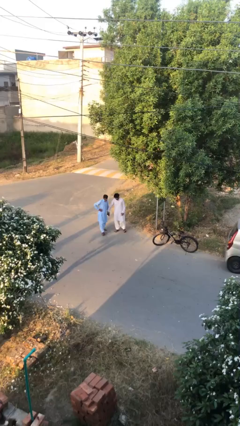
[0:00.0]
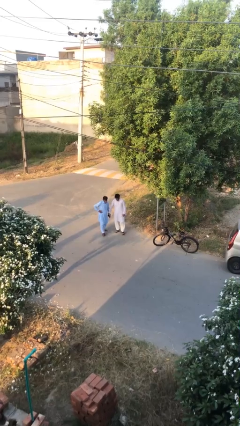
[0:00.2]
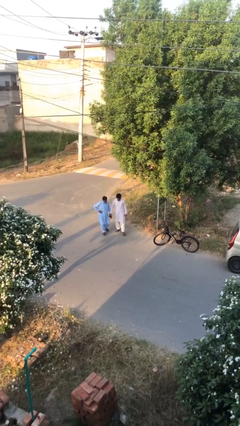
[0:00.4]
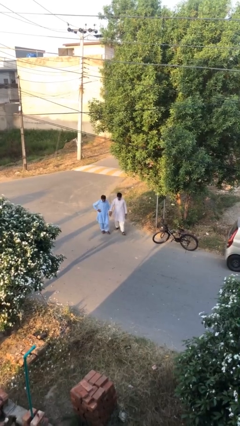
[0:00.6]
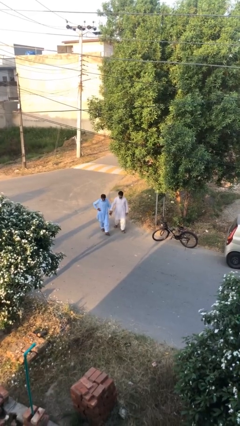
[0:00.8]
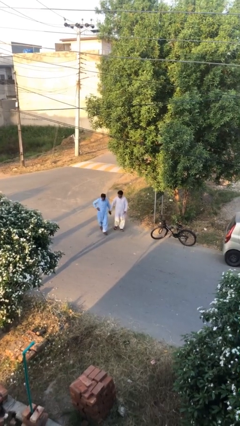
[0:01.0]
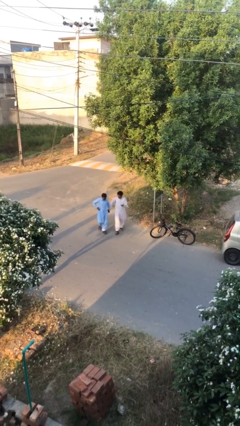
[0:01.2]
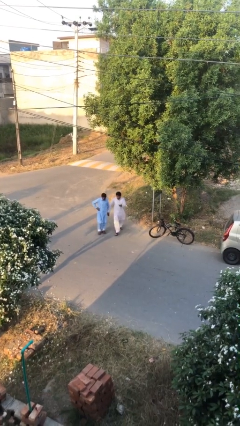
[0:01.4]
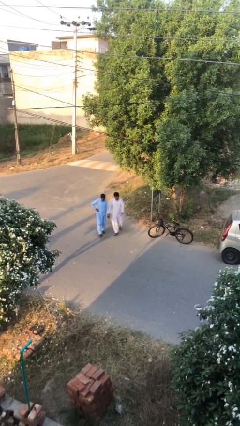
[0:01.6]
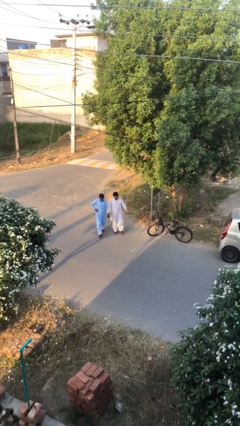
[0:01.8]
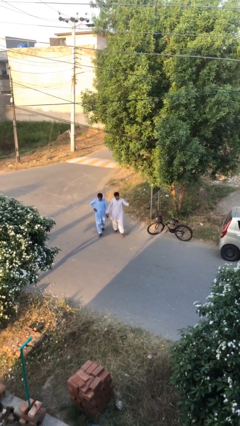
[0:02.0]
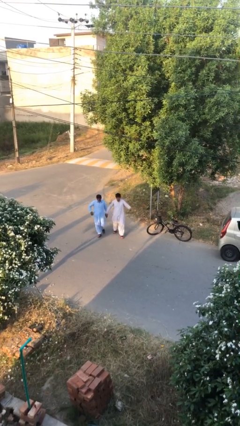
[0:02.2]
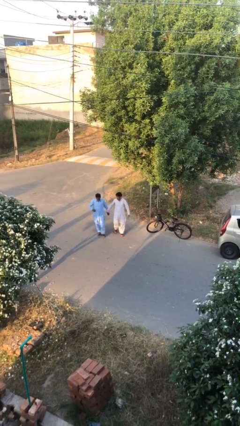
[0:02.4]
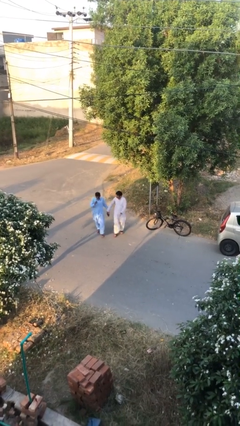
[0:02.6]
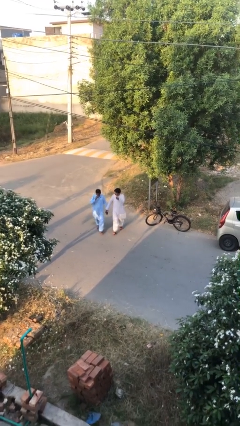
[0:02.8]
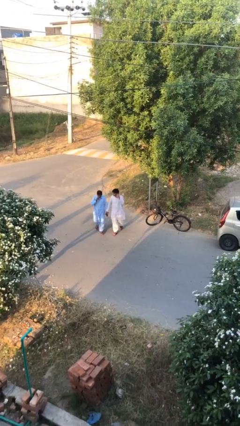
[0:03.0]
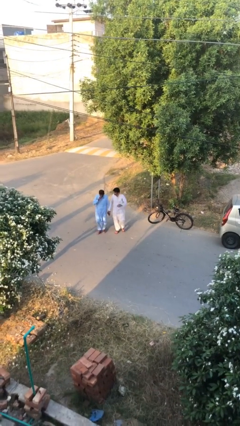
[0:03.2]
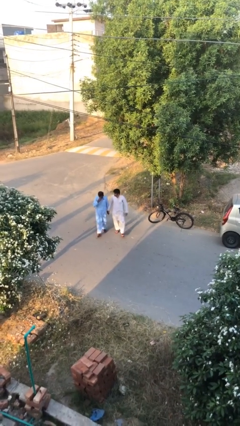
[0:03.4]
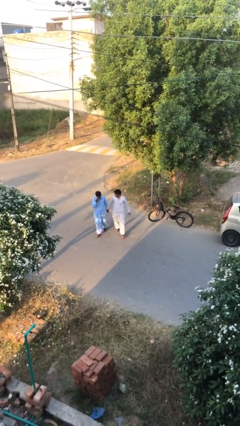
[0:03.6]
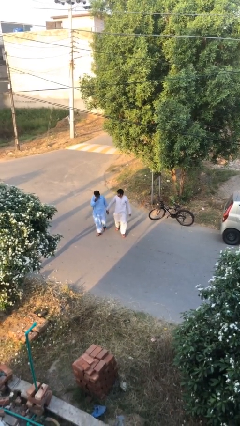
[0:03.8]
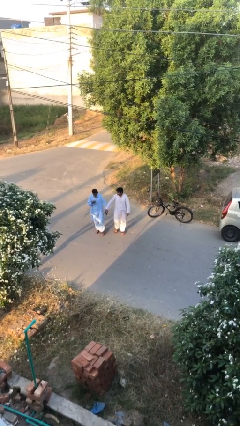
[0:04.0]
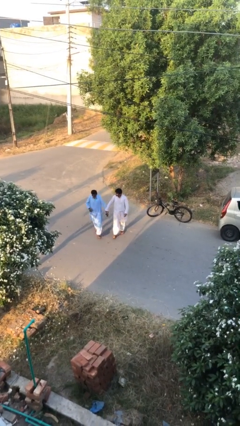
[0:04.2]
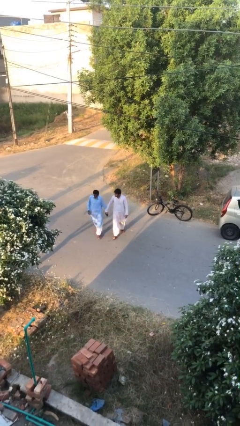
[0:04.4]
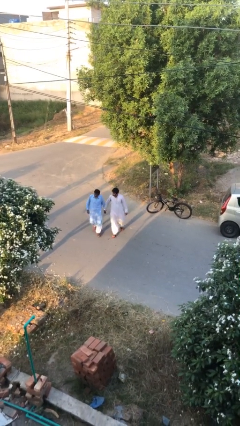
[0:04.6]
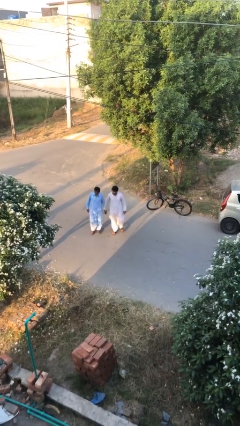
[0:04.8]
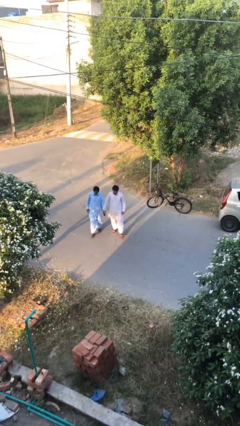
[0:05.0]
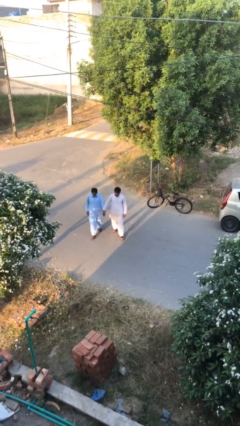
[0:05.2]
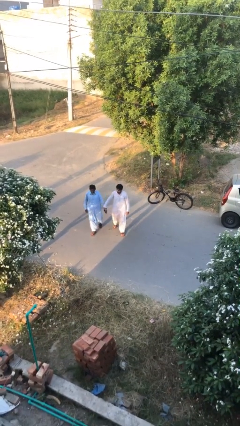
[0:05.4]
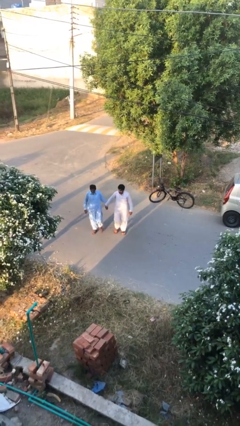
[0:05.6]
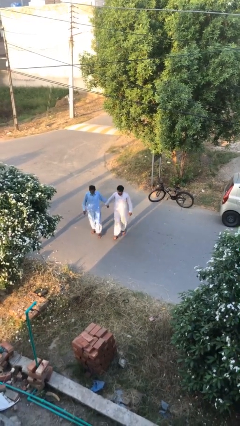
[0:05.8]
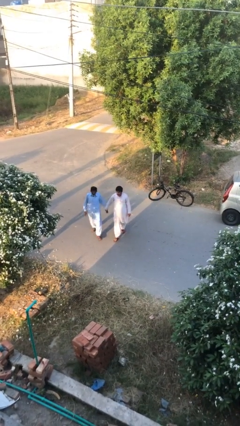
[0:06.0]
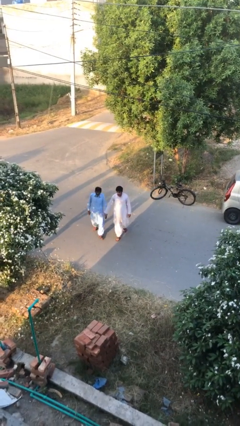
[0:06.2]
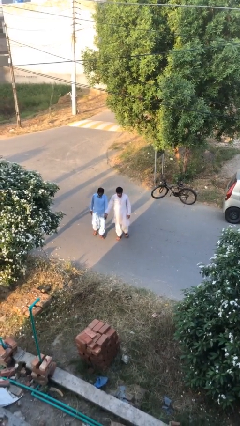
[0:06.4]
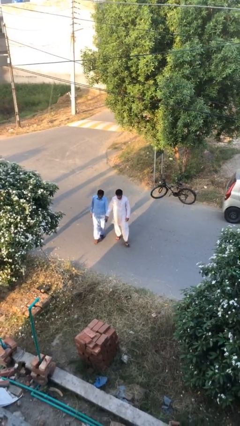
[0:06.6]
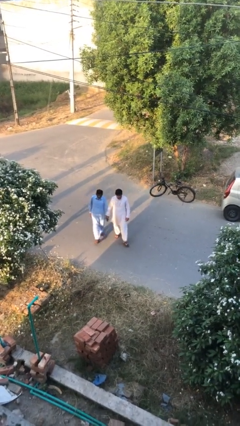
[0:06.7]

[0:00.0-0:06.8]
person holds hand

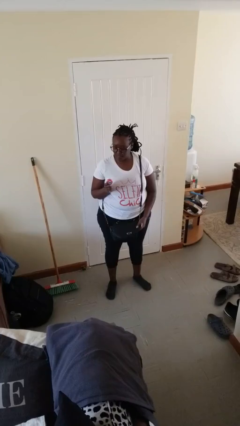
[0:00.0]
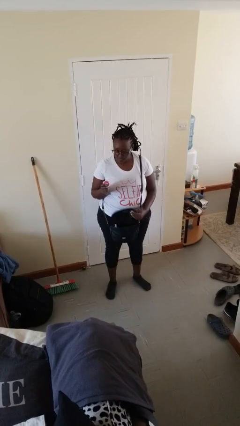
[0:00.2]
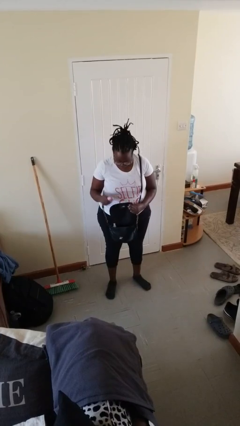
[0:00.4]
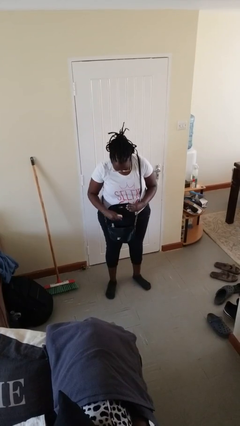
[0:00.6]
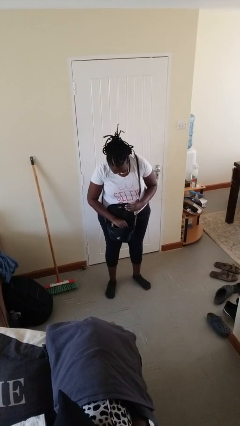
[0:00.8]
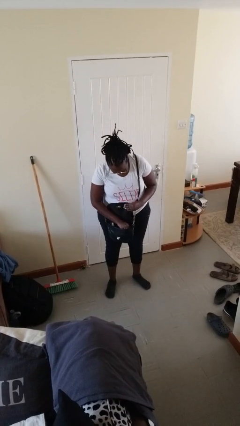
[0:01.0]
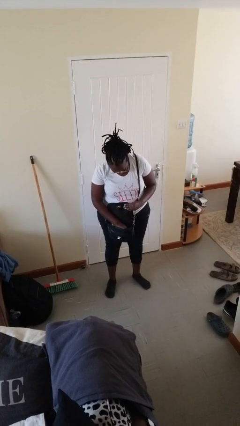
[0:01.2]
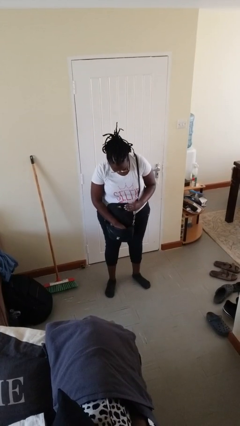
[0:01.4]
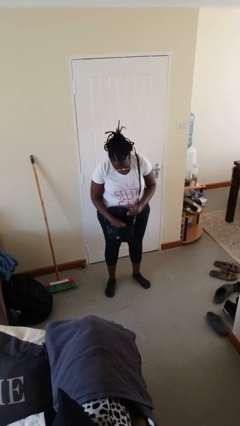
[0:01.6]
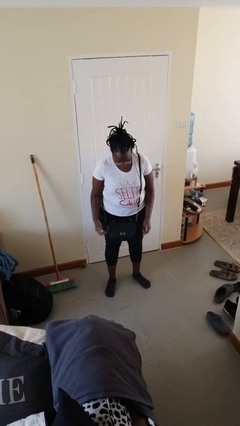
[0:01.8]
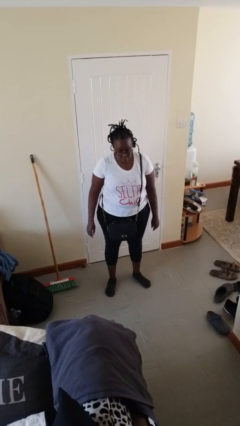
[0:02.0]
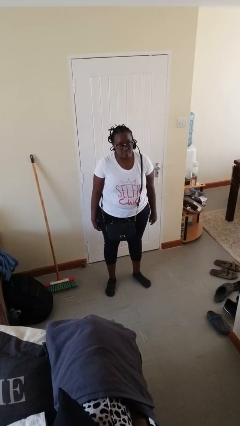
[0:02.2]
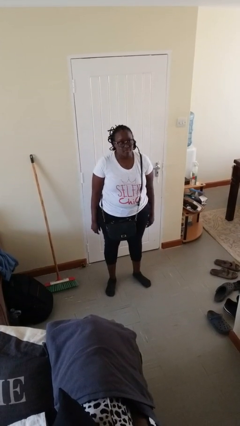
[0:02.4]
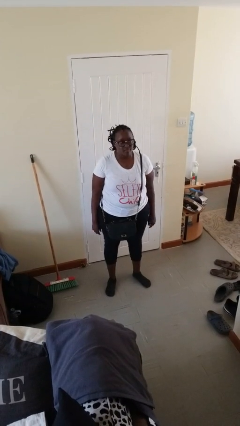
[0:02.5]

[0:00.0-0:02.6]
person puts object into purse

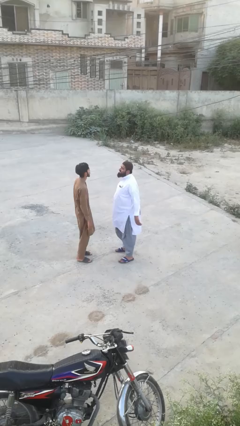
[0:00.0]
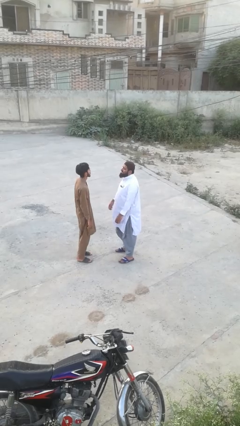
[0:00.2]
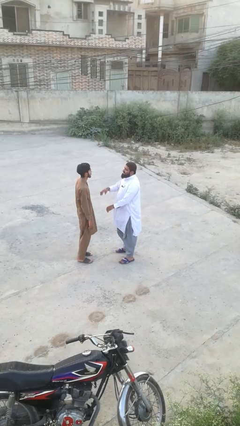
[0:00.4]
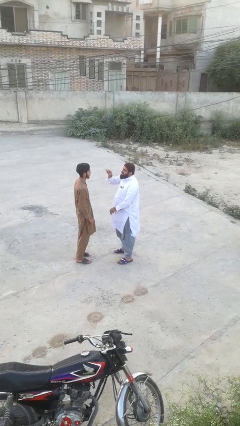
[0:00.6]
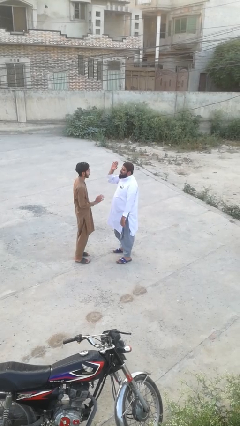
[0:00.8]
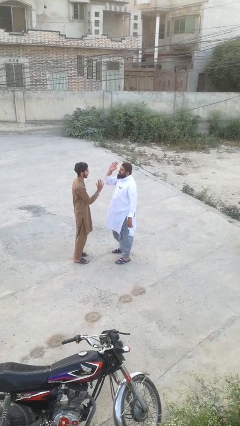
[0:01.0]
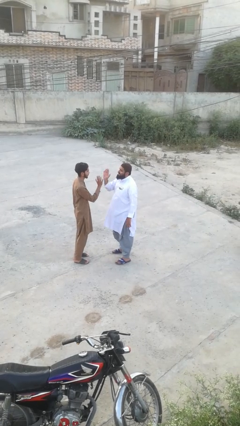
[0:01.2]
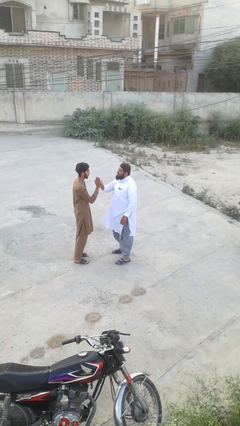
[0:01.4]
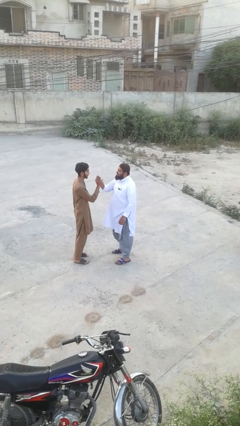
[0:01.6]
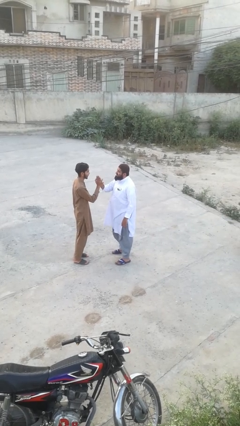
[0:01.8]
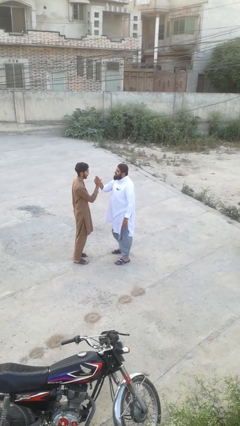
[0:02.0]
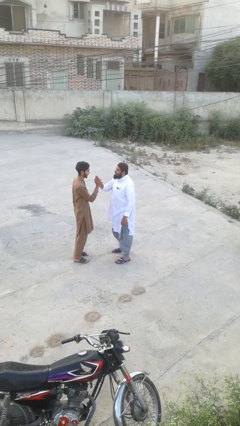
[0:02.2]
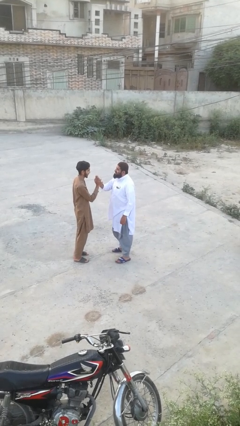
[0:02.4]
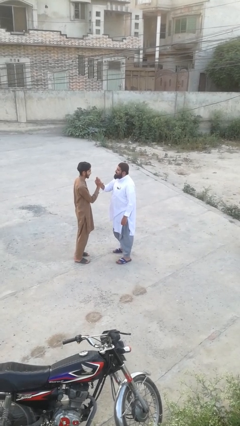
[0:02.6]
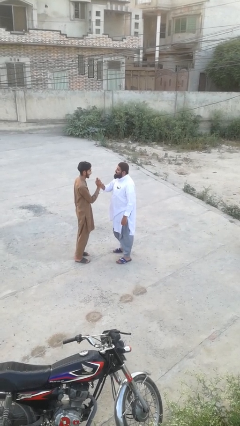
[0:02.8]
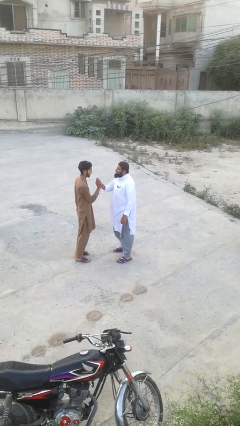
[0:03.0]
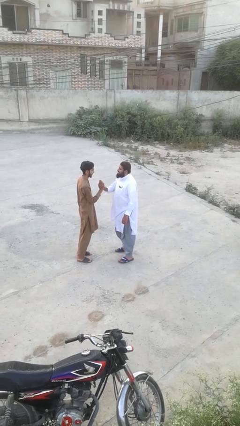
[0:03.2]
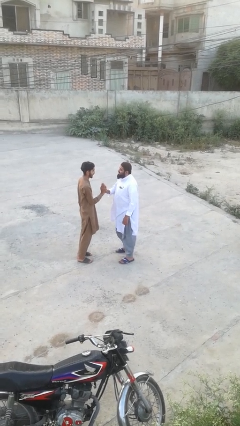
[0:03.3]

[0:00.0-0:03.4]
person highfives hand

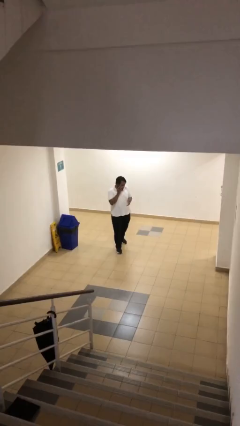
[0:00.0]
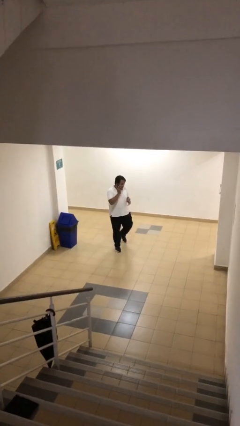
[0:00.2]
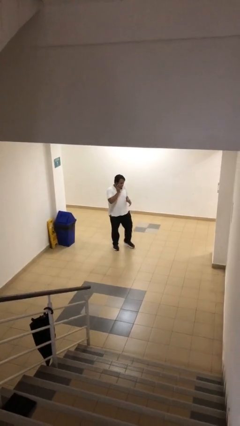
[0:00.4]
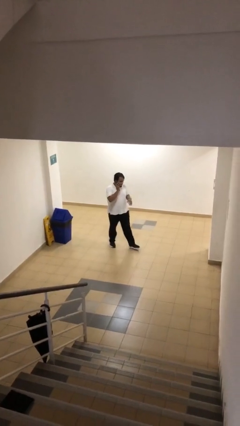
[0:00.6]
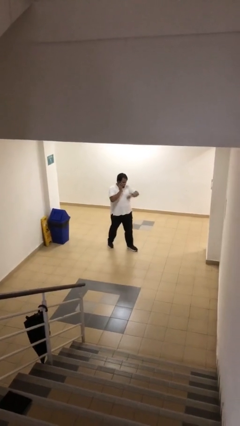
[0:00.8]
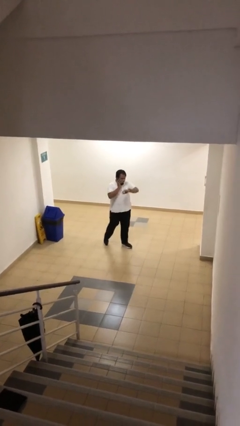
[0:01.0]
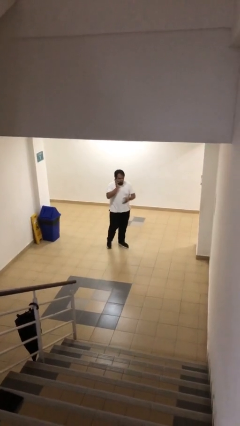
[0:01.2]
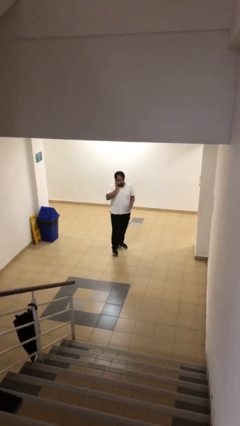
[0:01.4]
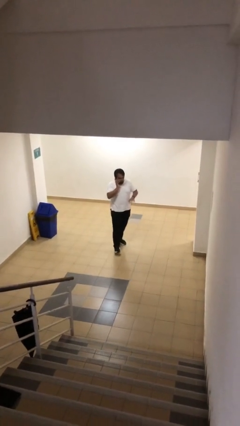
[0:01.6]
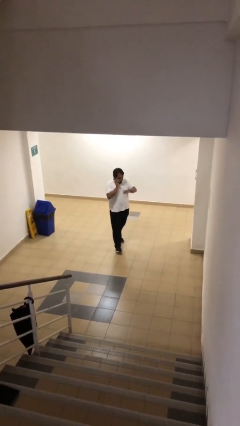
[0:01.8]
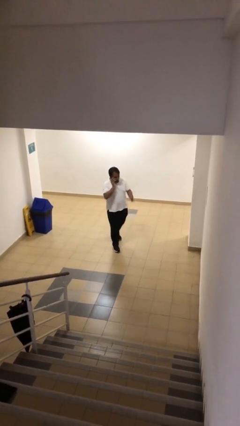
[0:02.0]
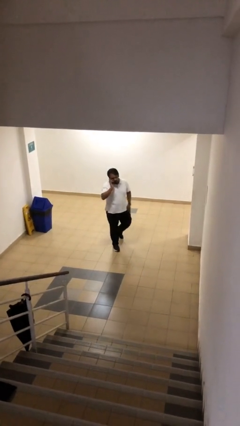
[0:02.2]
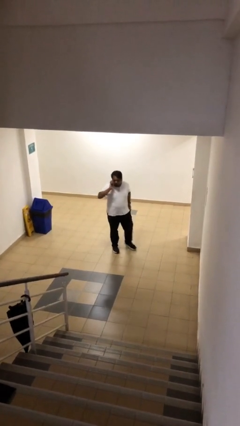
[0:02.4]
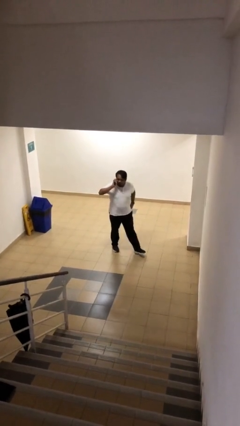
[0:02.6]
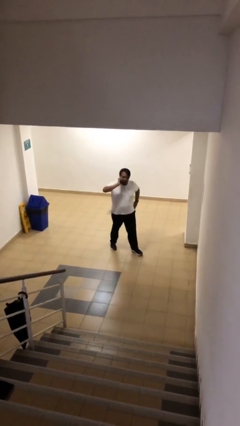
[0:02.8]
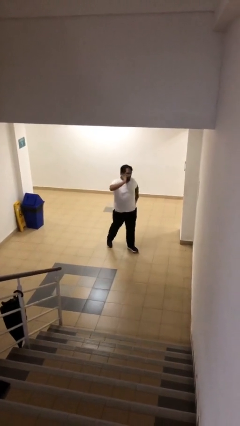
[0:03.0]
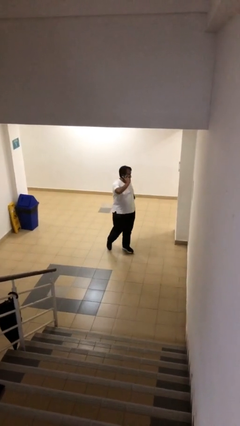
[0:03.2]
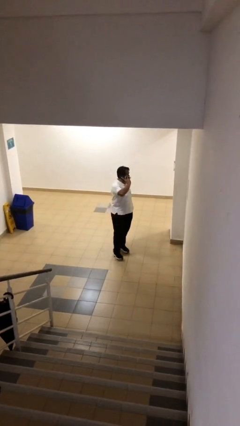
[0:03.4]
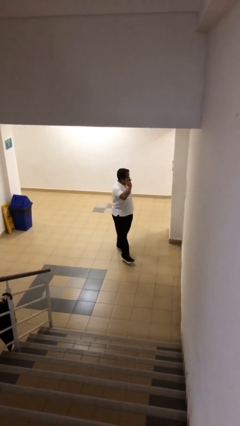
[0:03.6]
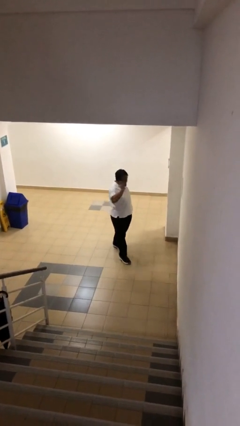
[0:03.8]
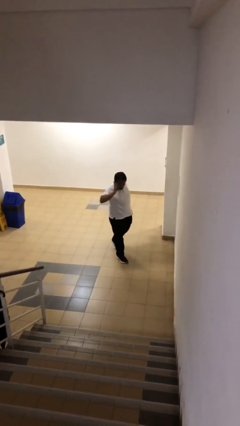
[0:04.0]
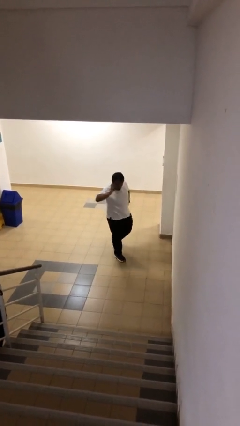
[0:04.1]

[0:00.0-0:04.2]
person talks on phone

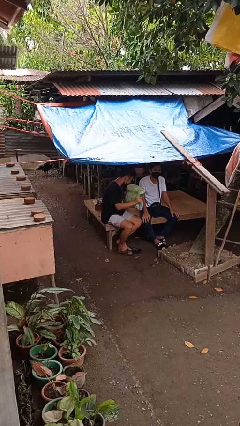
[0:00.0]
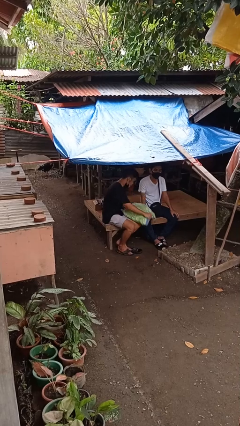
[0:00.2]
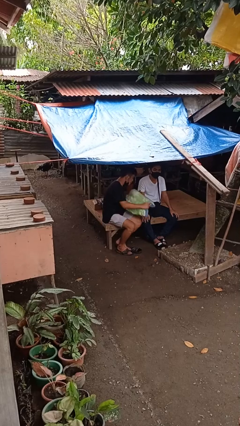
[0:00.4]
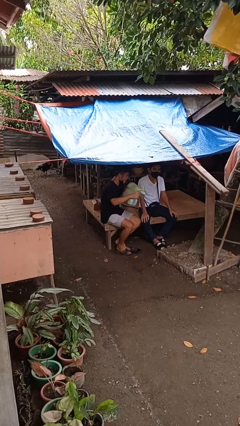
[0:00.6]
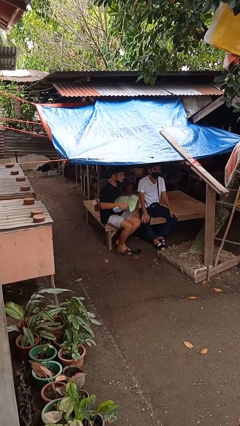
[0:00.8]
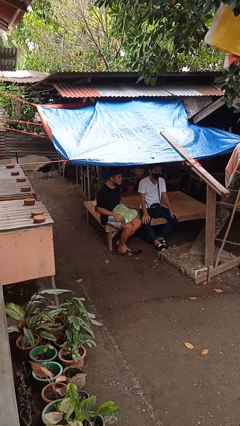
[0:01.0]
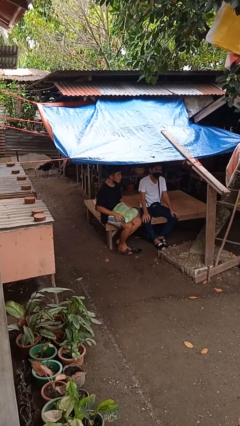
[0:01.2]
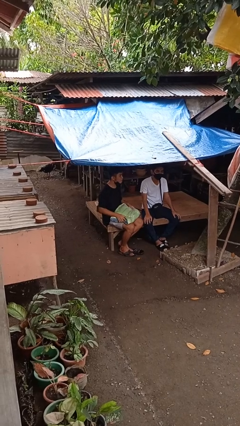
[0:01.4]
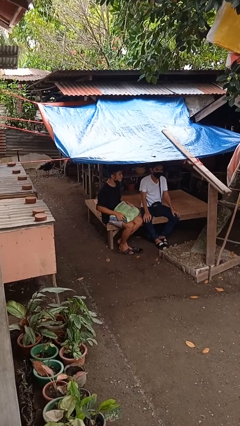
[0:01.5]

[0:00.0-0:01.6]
person hits person with pillow
